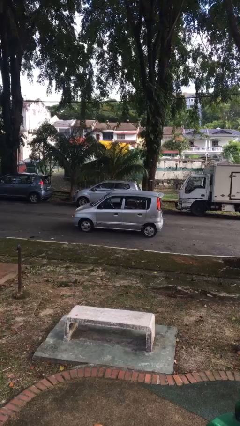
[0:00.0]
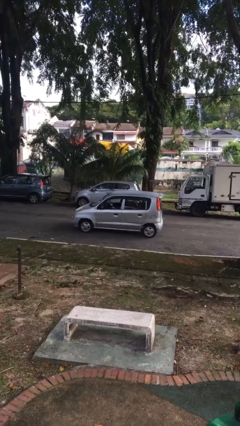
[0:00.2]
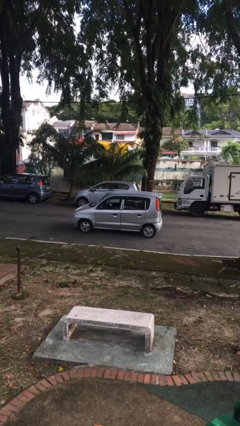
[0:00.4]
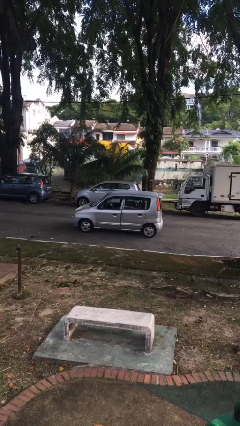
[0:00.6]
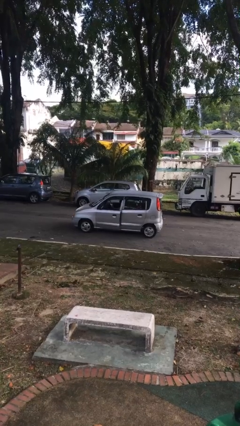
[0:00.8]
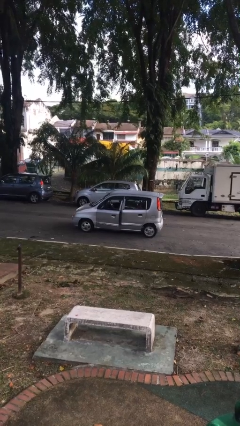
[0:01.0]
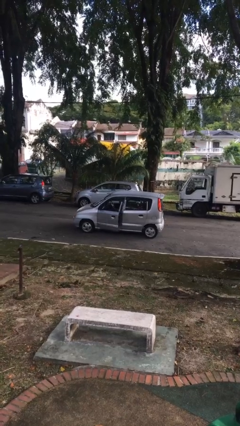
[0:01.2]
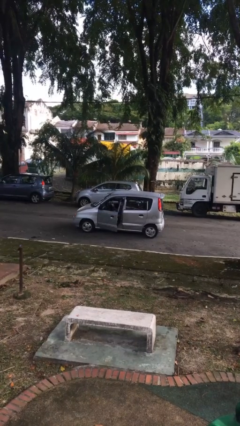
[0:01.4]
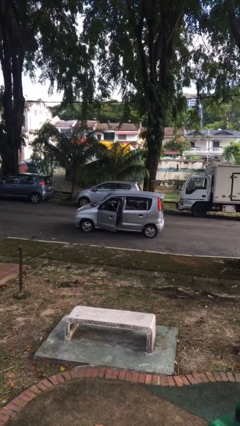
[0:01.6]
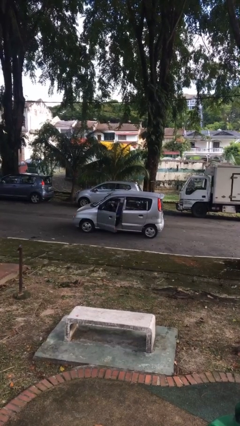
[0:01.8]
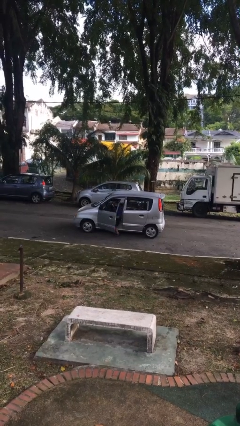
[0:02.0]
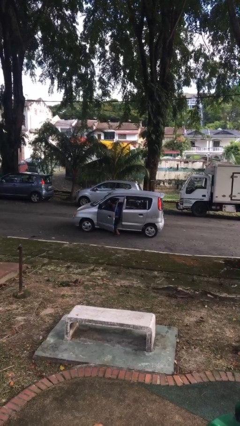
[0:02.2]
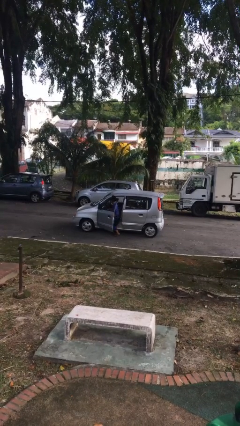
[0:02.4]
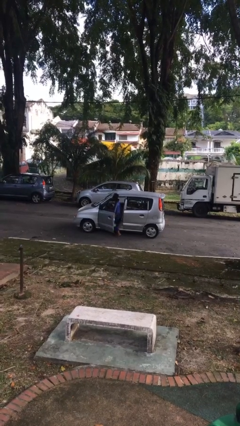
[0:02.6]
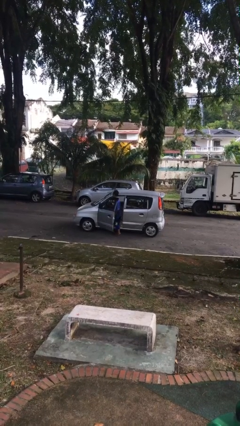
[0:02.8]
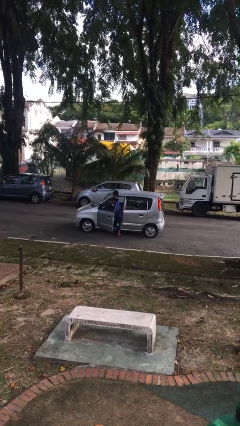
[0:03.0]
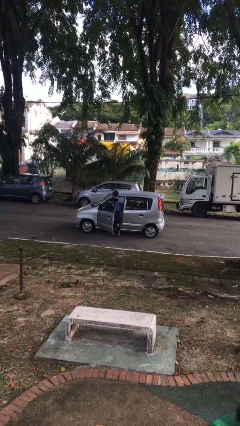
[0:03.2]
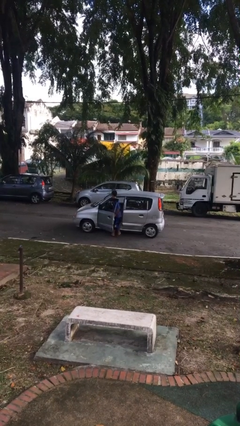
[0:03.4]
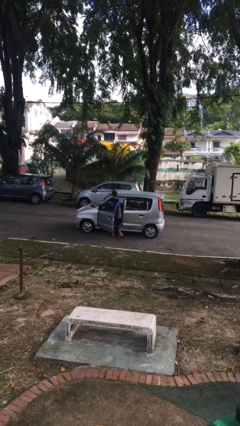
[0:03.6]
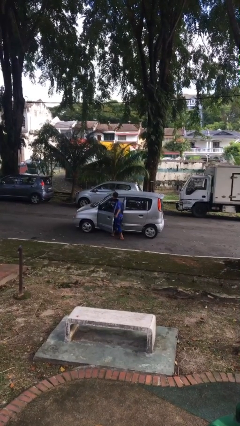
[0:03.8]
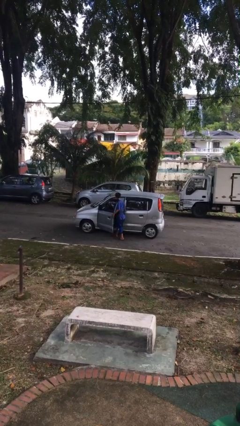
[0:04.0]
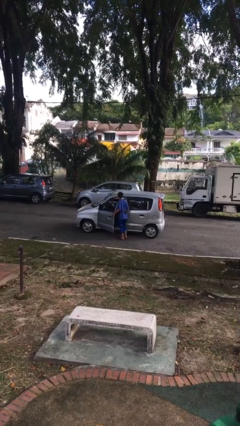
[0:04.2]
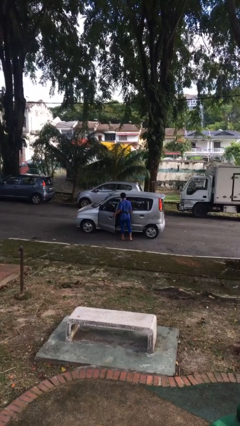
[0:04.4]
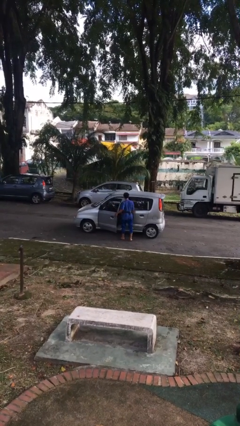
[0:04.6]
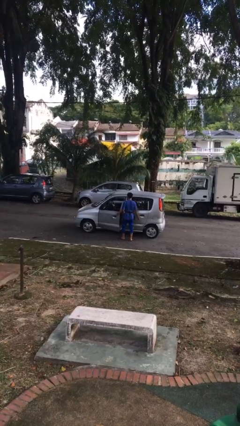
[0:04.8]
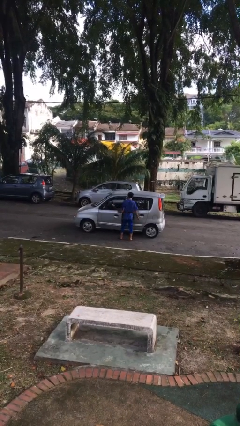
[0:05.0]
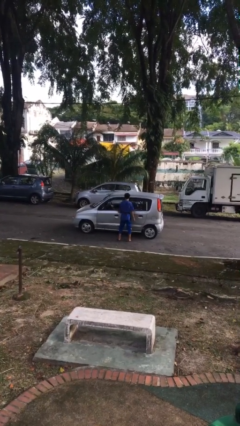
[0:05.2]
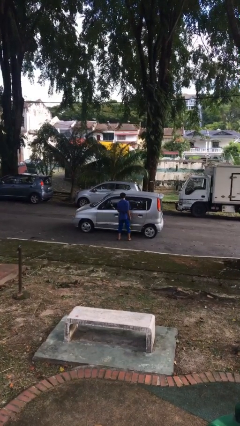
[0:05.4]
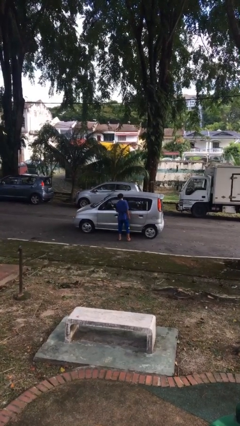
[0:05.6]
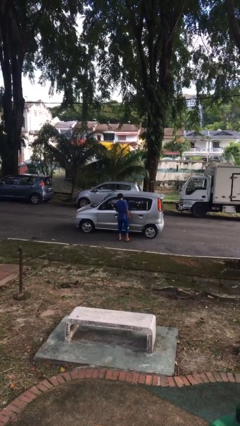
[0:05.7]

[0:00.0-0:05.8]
car drops off person

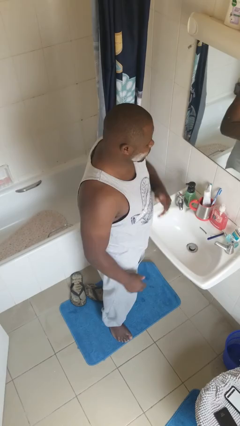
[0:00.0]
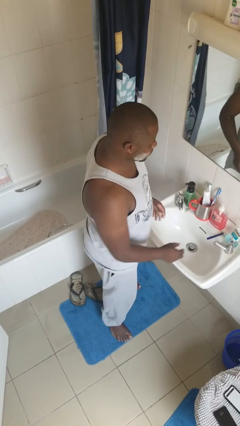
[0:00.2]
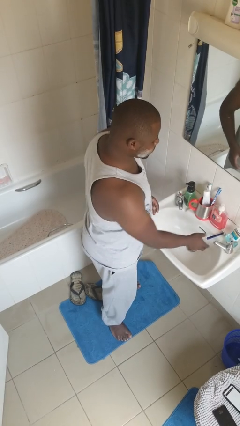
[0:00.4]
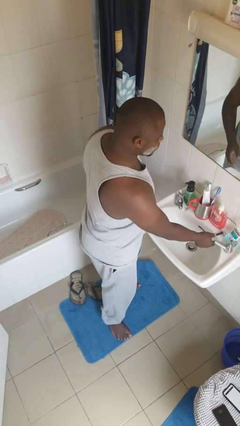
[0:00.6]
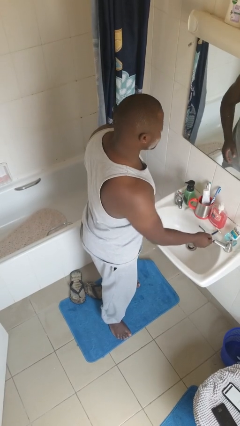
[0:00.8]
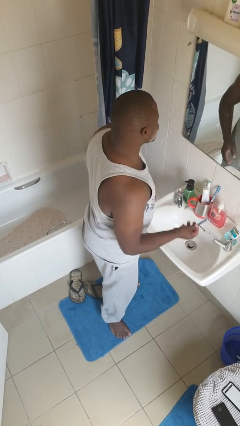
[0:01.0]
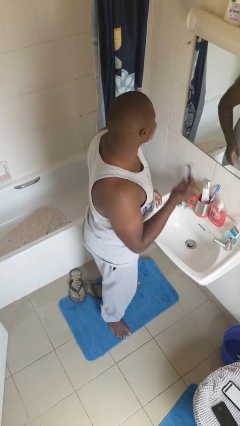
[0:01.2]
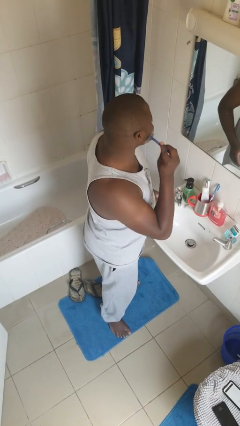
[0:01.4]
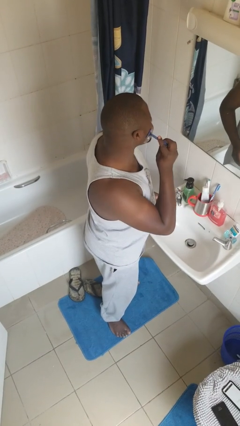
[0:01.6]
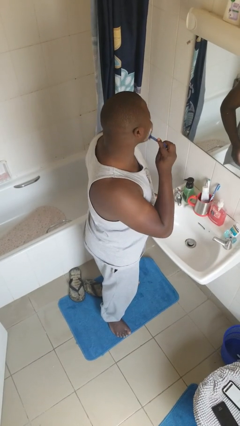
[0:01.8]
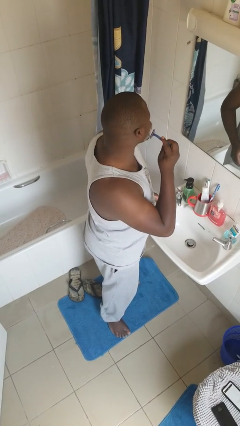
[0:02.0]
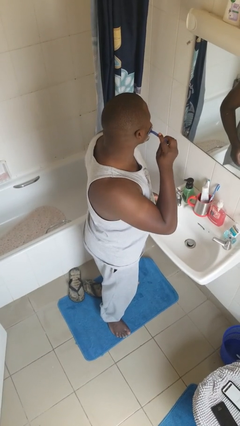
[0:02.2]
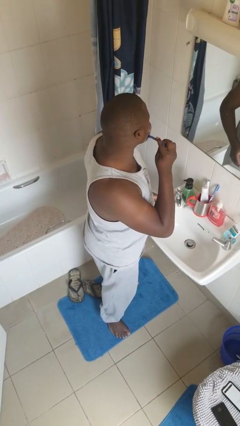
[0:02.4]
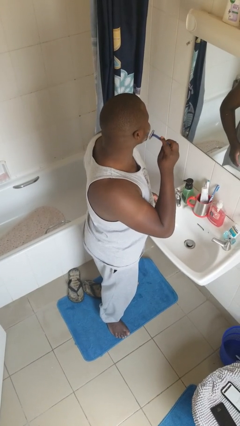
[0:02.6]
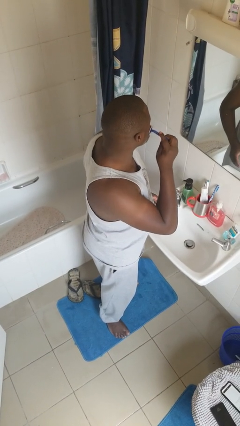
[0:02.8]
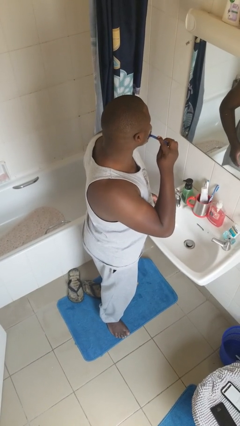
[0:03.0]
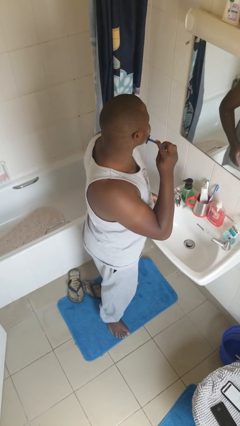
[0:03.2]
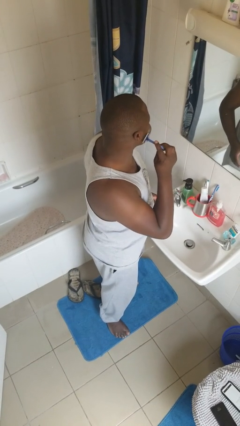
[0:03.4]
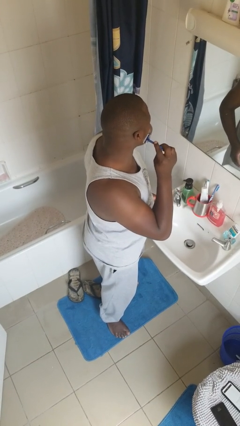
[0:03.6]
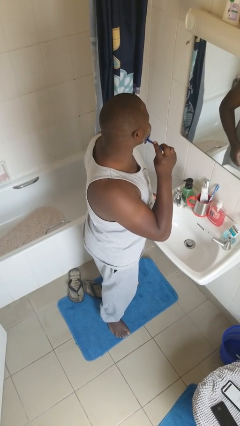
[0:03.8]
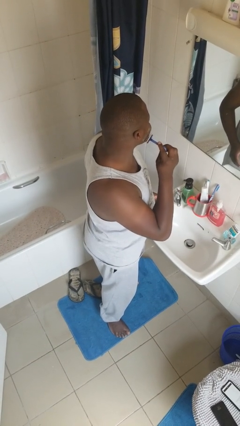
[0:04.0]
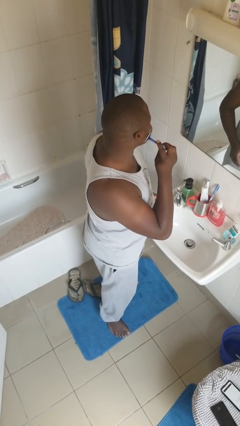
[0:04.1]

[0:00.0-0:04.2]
person shaves face

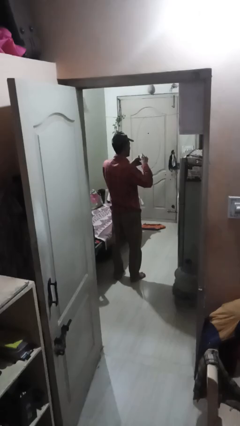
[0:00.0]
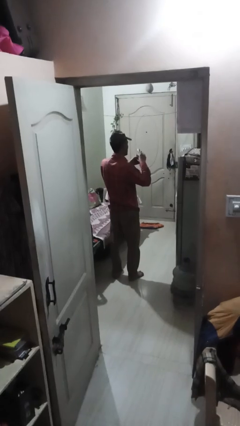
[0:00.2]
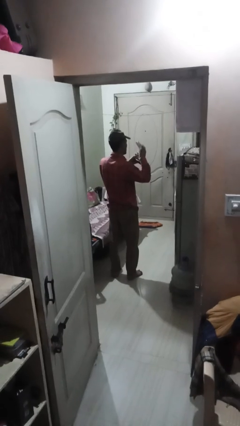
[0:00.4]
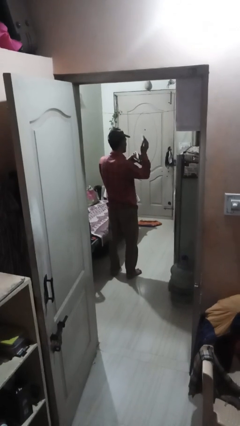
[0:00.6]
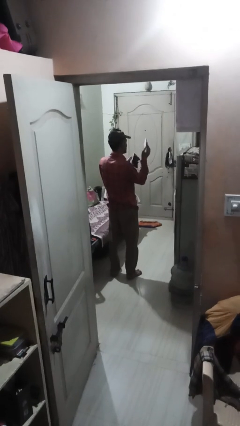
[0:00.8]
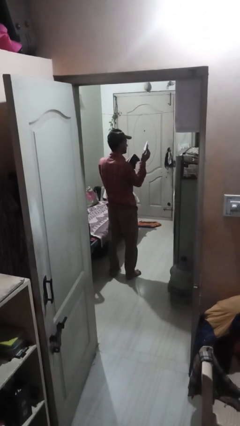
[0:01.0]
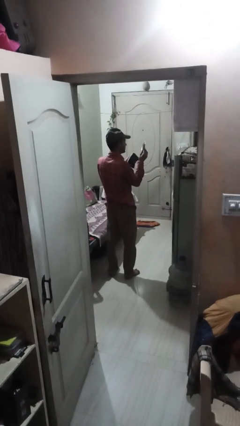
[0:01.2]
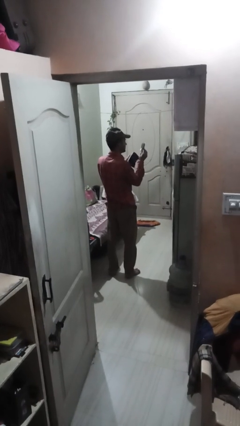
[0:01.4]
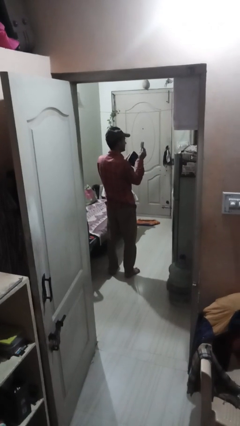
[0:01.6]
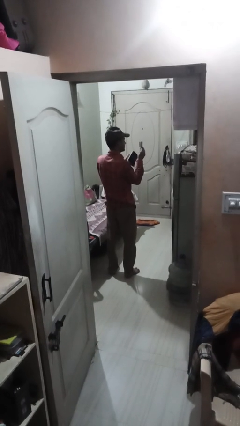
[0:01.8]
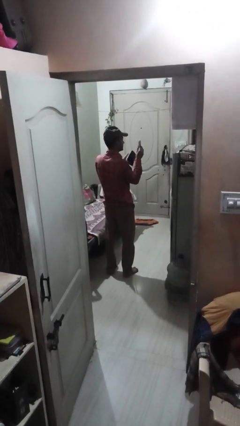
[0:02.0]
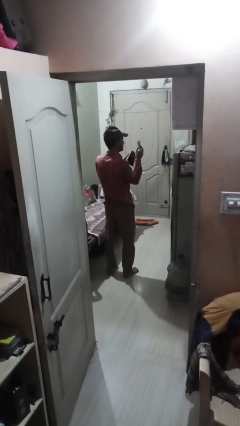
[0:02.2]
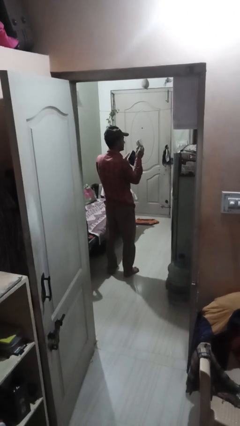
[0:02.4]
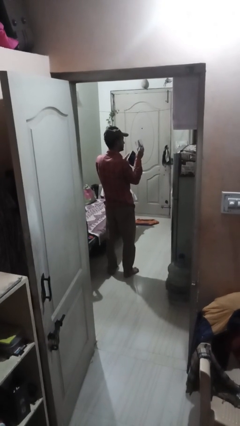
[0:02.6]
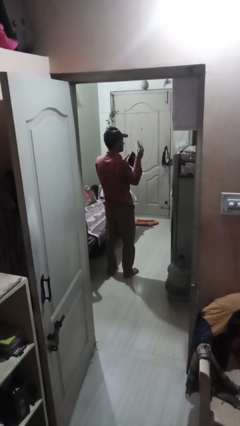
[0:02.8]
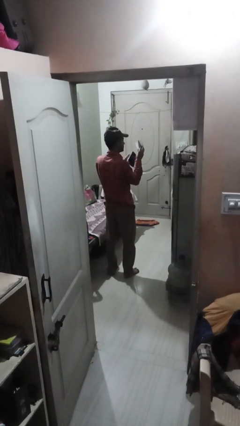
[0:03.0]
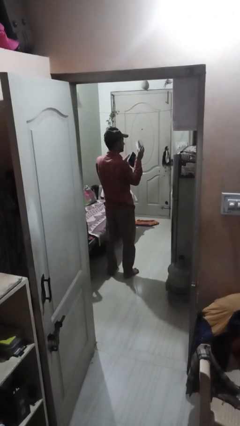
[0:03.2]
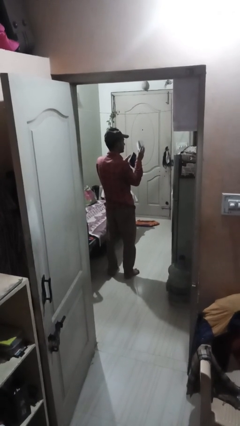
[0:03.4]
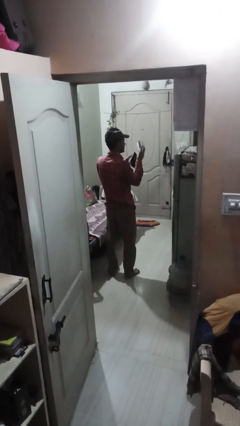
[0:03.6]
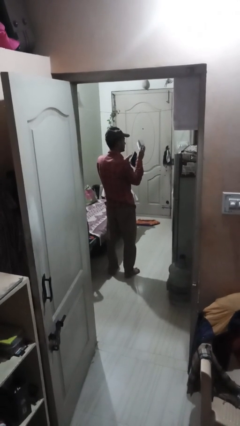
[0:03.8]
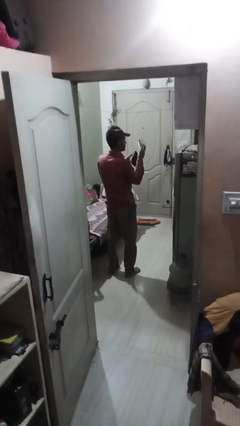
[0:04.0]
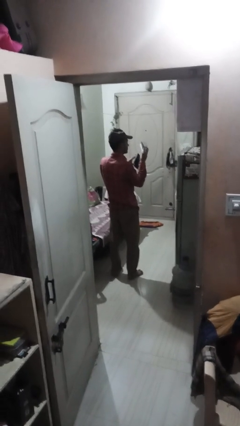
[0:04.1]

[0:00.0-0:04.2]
person takes object from purse

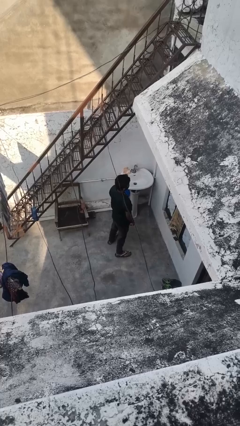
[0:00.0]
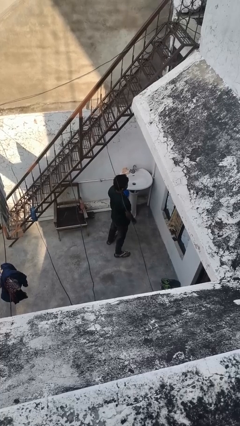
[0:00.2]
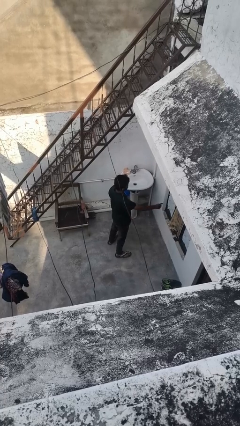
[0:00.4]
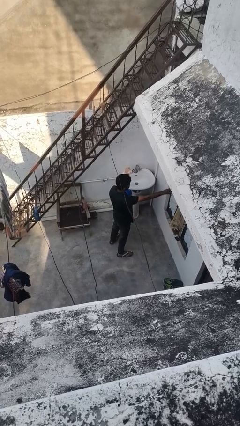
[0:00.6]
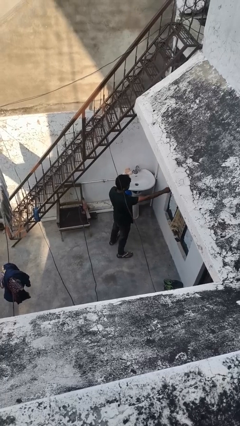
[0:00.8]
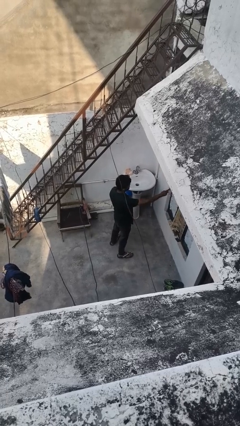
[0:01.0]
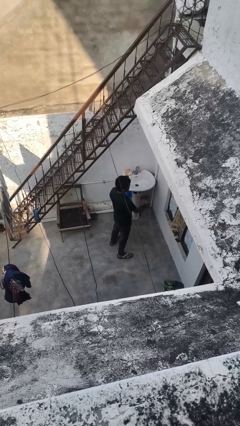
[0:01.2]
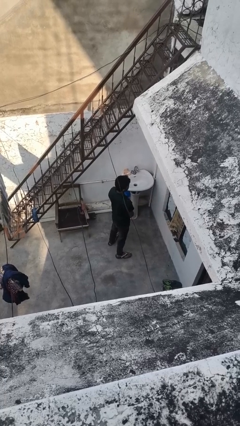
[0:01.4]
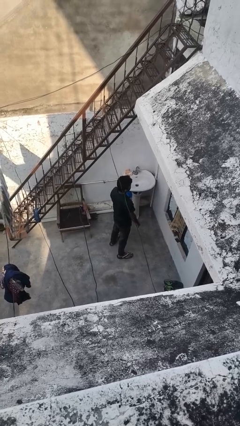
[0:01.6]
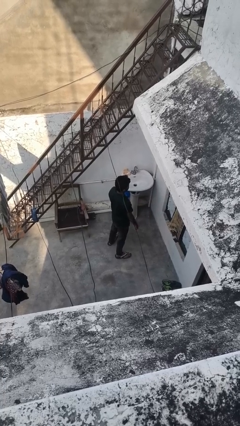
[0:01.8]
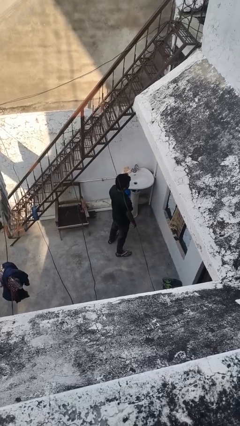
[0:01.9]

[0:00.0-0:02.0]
person gestures behind me

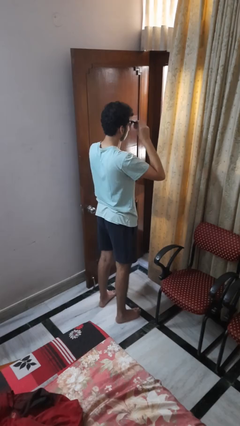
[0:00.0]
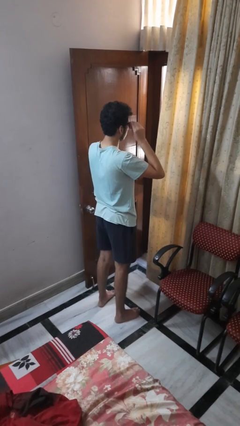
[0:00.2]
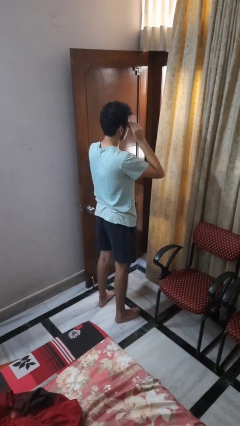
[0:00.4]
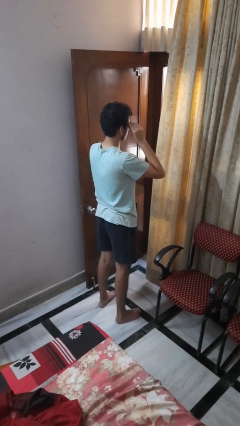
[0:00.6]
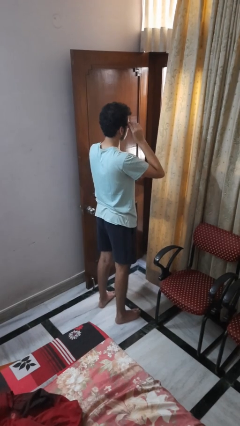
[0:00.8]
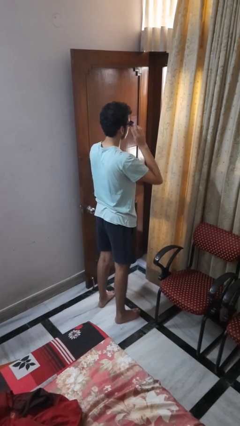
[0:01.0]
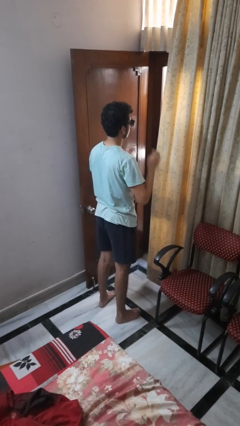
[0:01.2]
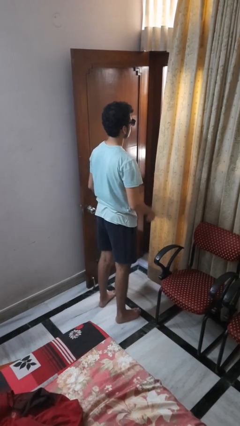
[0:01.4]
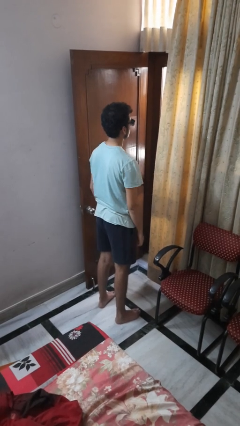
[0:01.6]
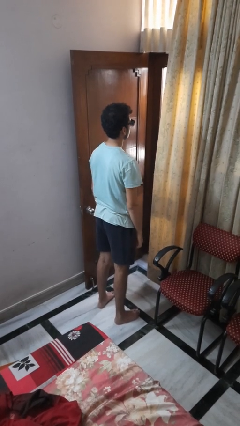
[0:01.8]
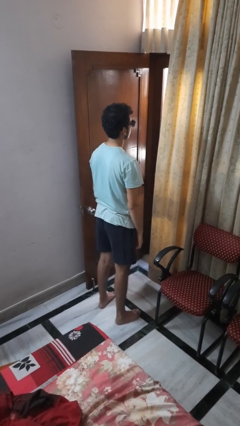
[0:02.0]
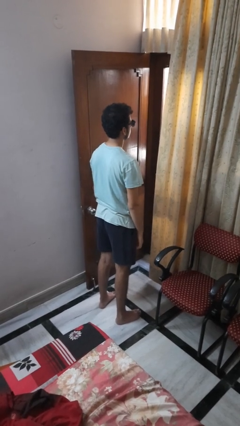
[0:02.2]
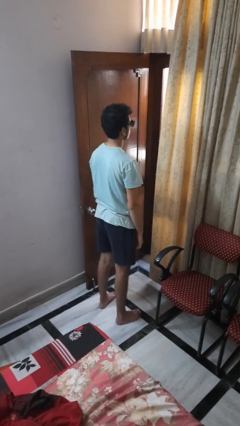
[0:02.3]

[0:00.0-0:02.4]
person puts on sunglasses
